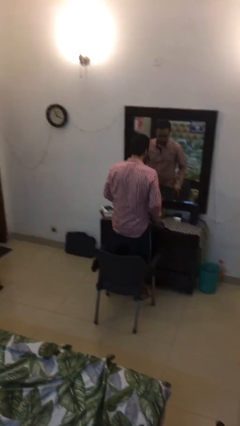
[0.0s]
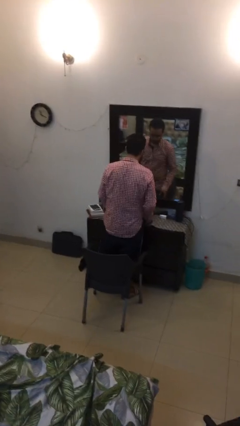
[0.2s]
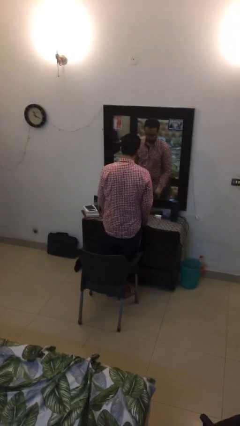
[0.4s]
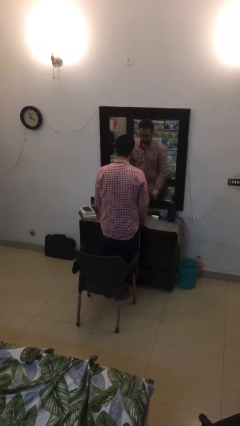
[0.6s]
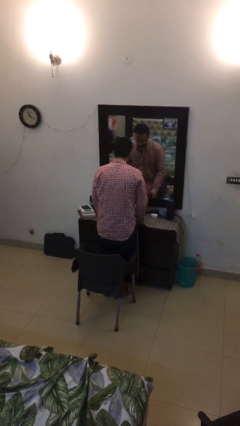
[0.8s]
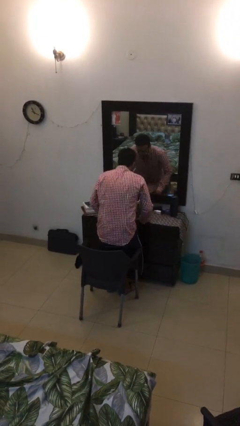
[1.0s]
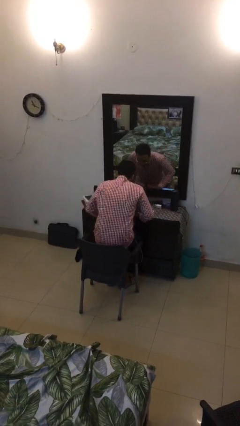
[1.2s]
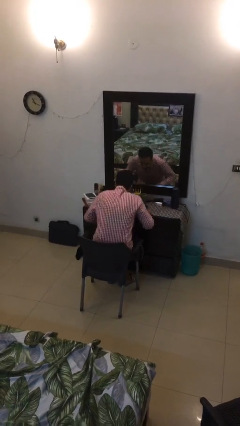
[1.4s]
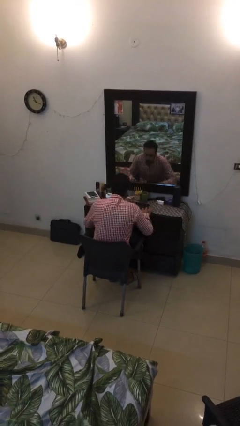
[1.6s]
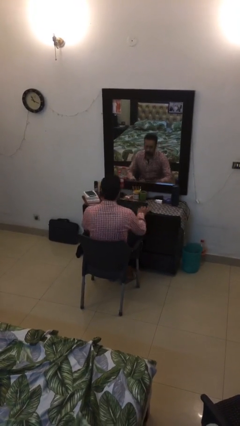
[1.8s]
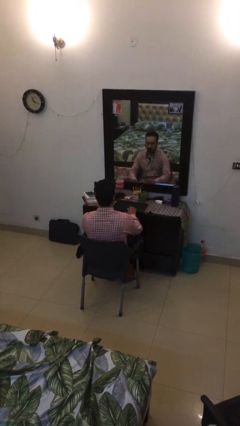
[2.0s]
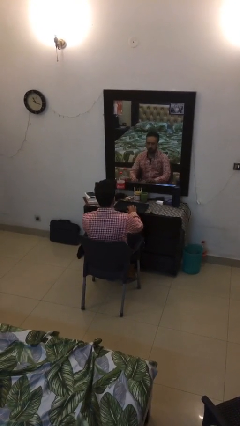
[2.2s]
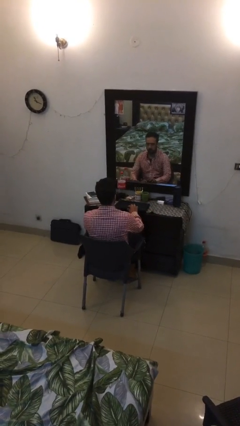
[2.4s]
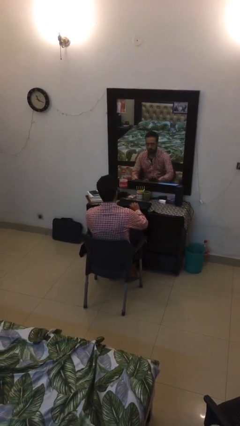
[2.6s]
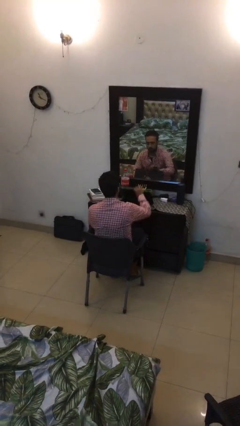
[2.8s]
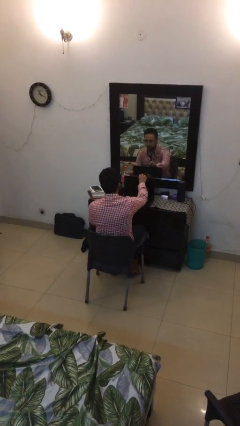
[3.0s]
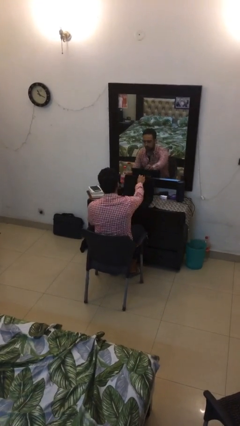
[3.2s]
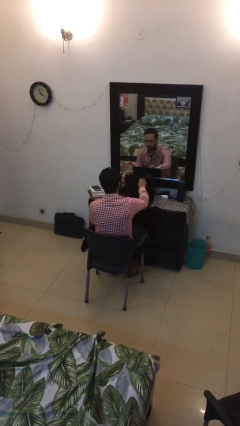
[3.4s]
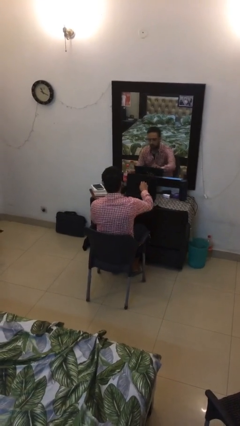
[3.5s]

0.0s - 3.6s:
person sits down

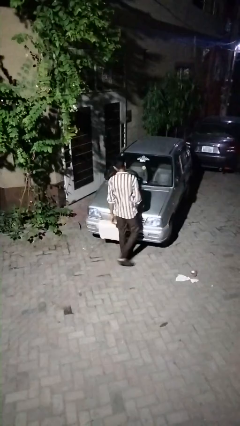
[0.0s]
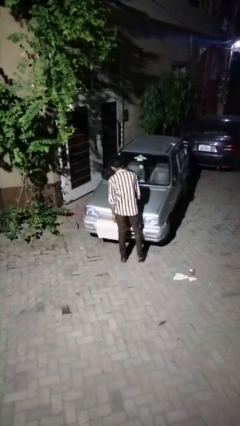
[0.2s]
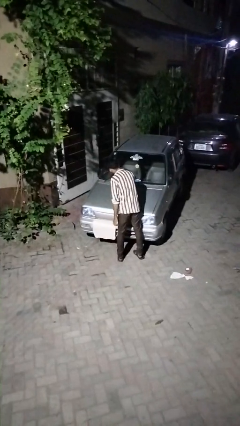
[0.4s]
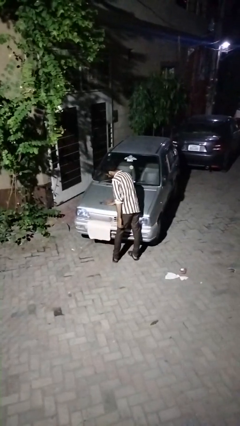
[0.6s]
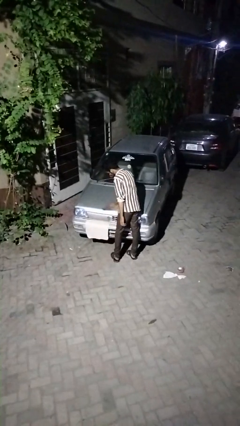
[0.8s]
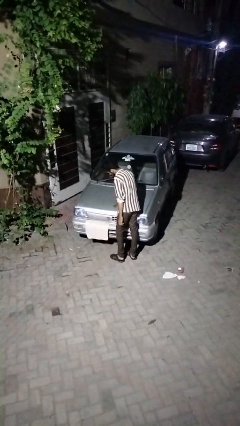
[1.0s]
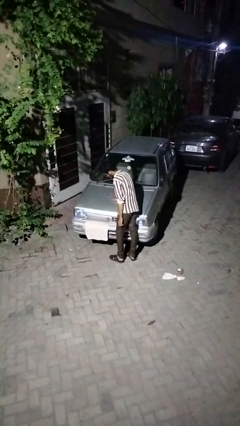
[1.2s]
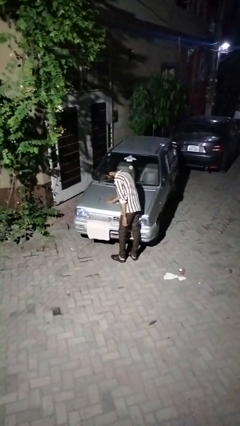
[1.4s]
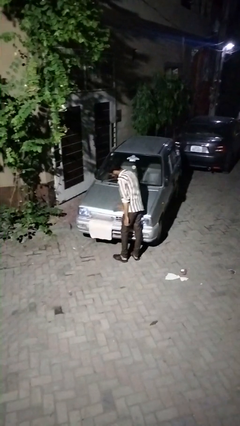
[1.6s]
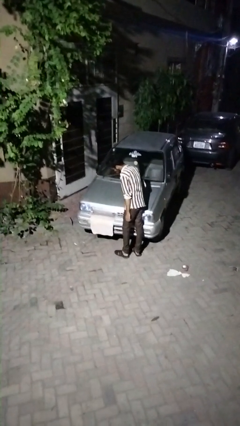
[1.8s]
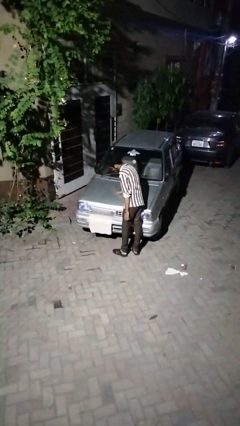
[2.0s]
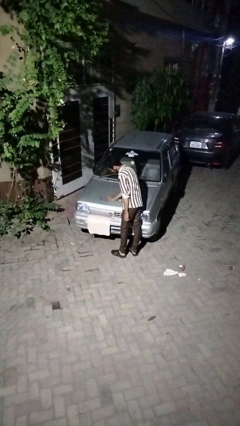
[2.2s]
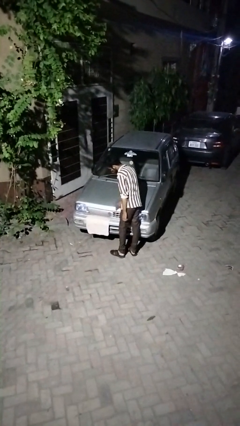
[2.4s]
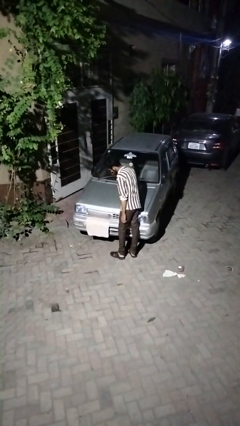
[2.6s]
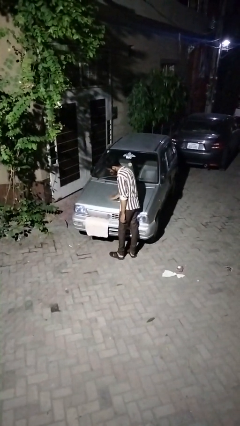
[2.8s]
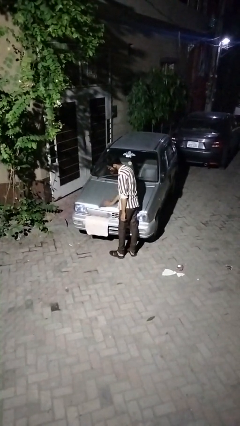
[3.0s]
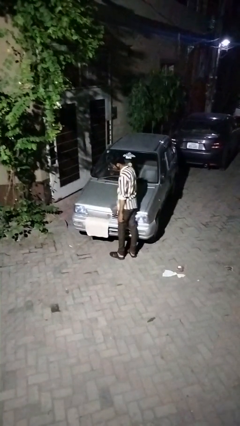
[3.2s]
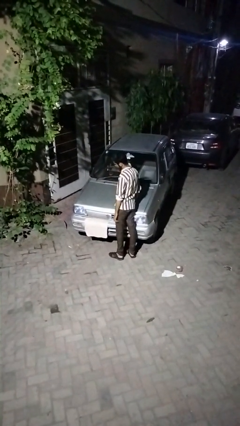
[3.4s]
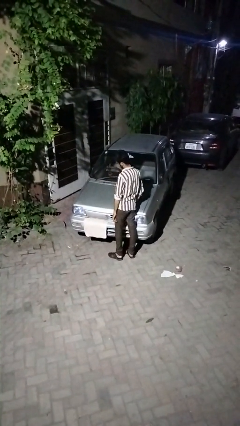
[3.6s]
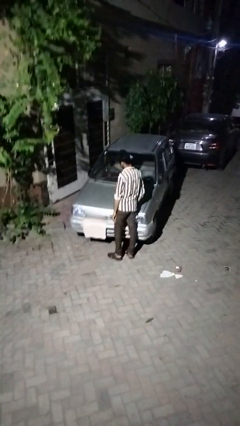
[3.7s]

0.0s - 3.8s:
person polishes car with rag

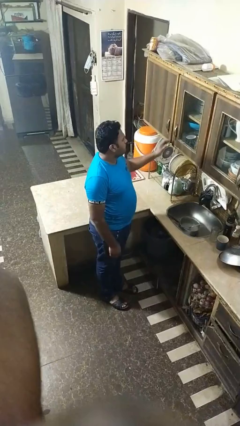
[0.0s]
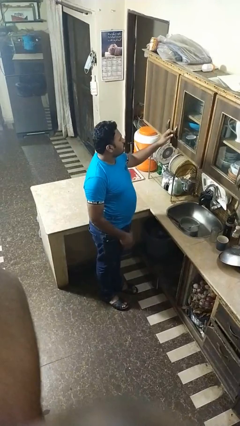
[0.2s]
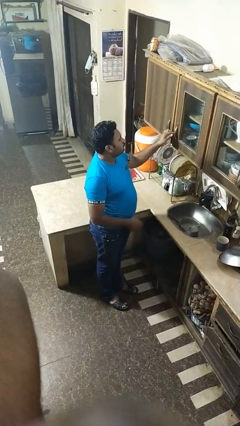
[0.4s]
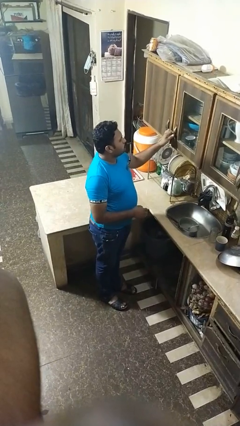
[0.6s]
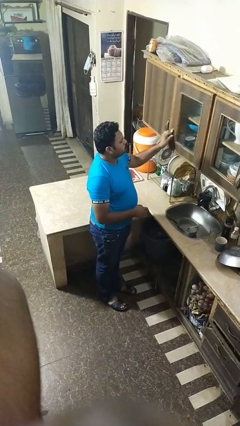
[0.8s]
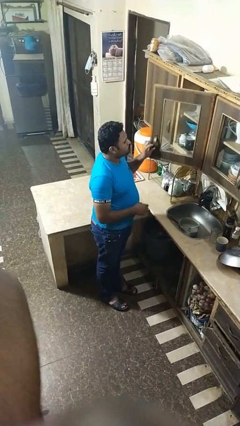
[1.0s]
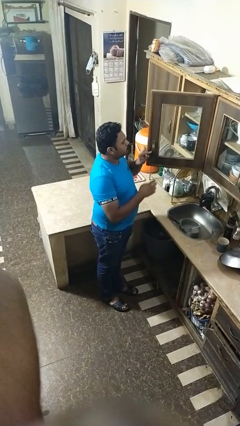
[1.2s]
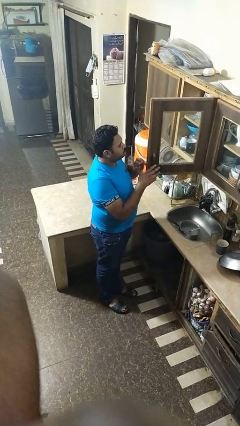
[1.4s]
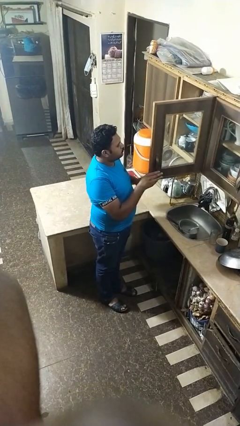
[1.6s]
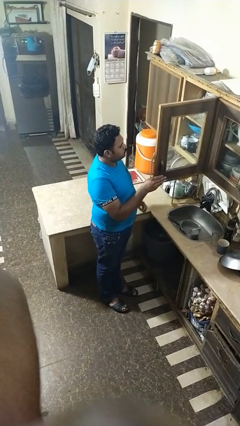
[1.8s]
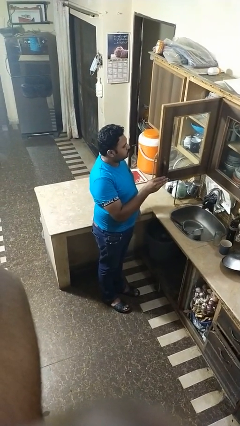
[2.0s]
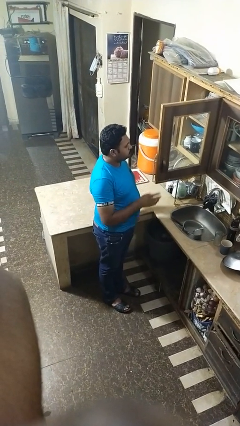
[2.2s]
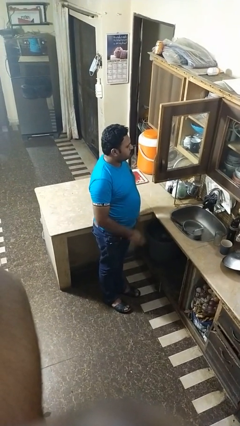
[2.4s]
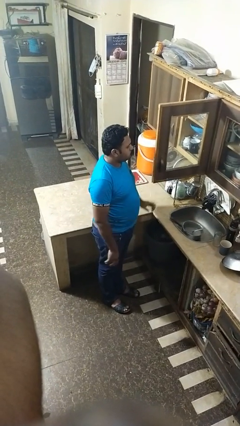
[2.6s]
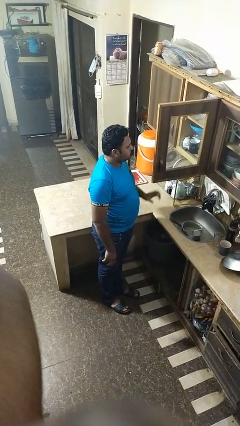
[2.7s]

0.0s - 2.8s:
person opens cabinet

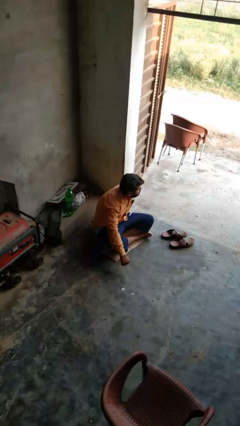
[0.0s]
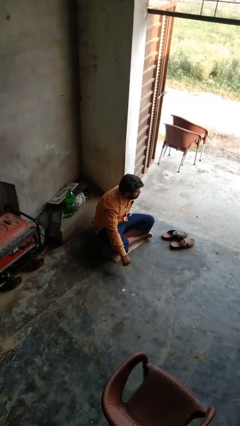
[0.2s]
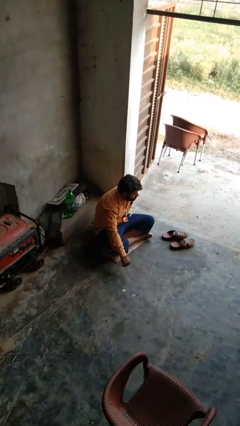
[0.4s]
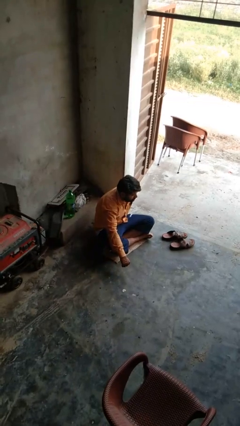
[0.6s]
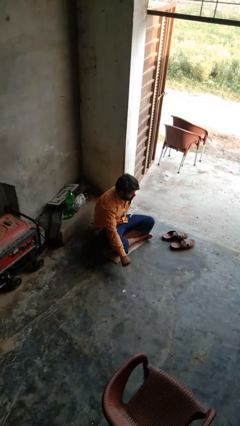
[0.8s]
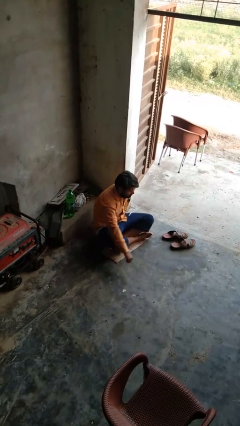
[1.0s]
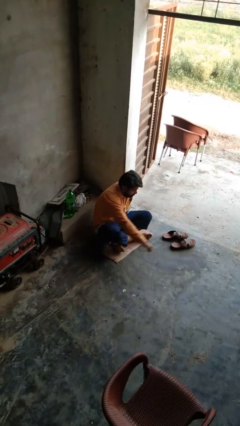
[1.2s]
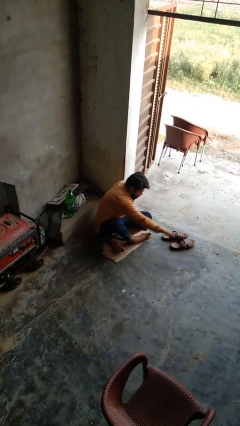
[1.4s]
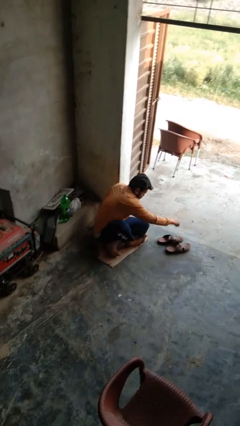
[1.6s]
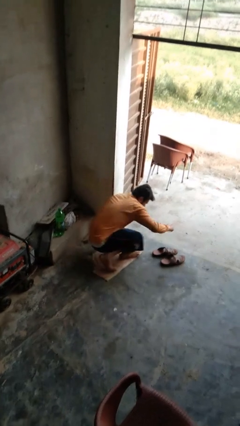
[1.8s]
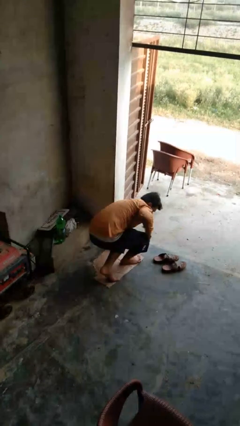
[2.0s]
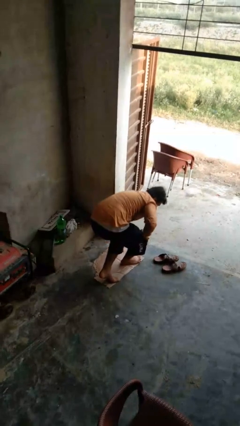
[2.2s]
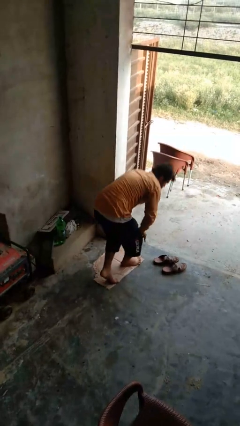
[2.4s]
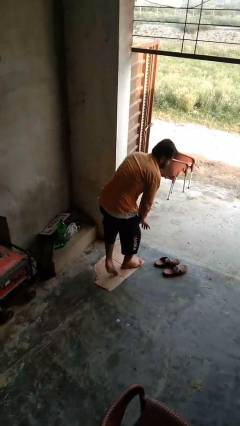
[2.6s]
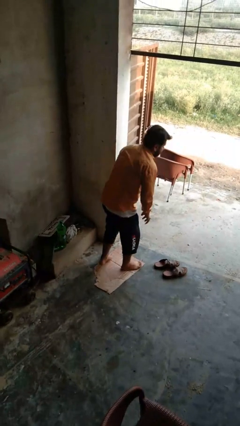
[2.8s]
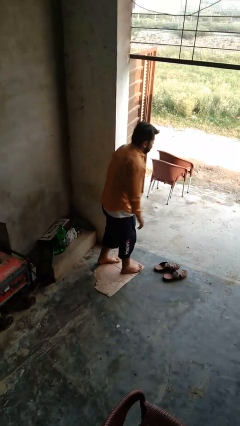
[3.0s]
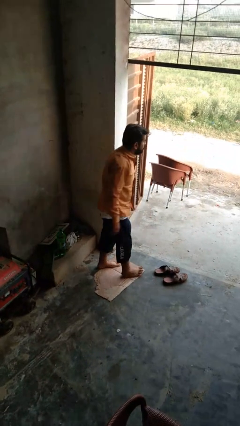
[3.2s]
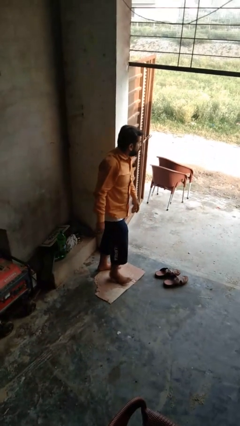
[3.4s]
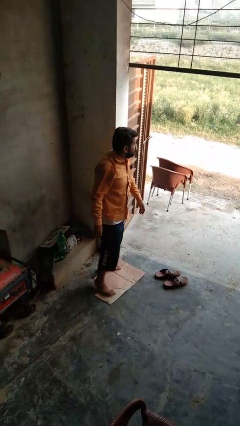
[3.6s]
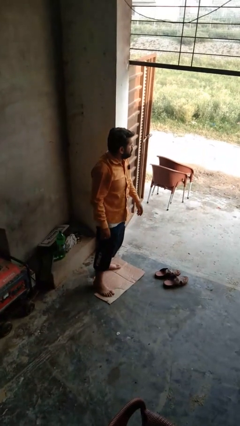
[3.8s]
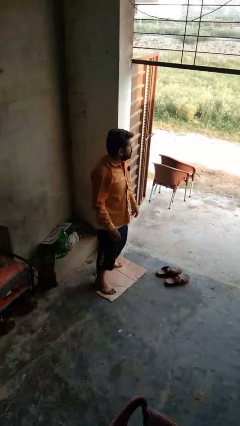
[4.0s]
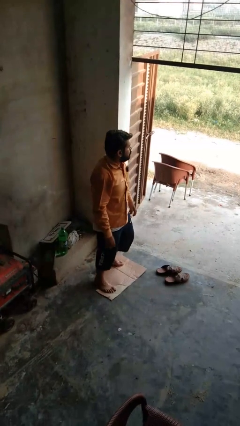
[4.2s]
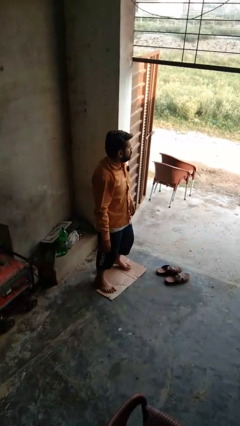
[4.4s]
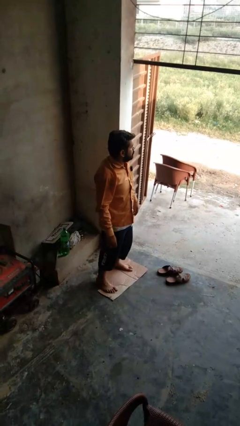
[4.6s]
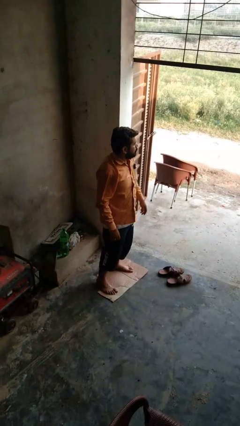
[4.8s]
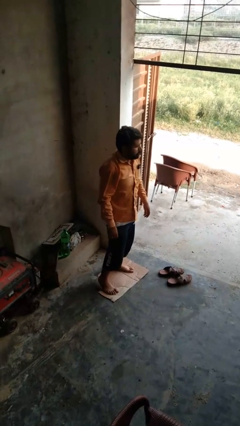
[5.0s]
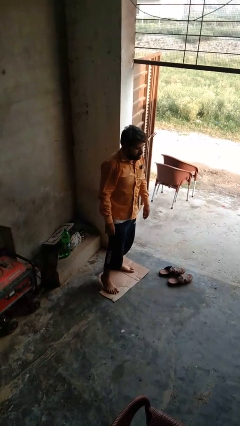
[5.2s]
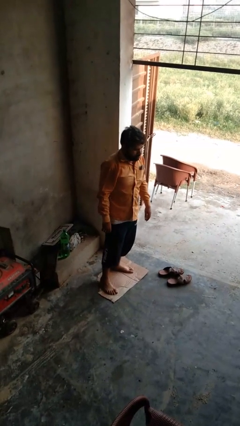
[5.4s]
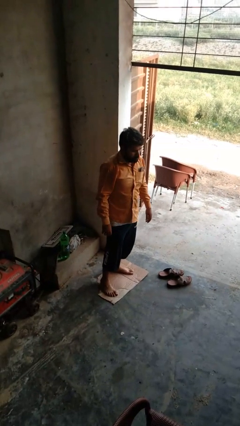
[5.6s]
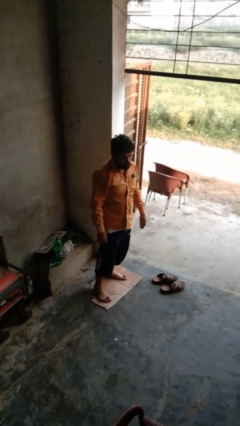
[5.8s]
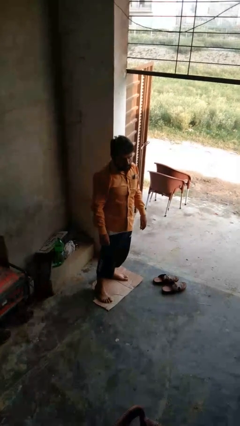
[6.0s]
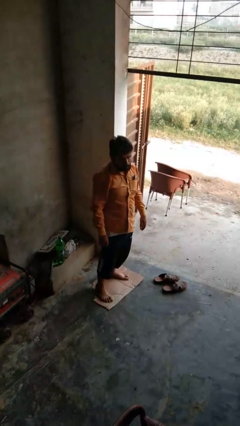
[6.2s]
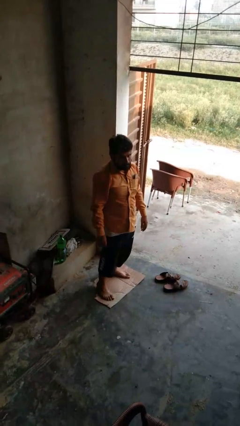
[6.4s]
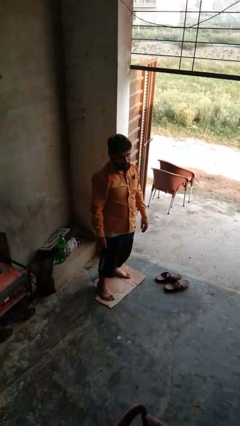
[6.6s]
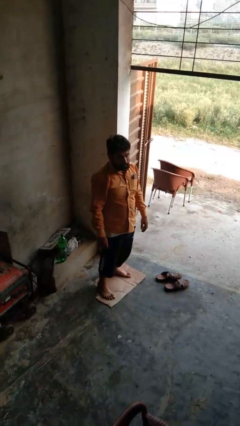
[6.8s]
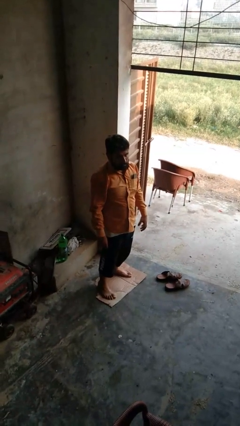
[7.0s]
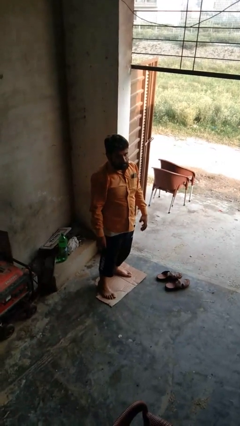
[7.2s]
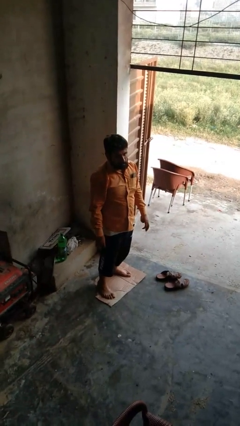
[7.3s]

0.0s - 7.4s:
person stands up from floor
